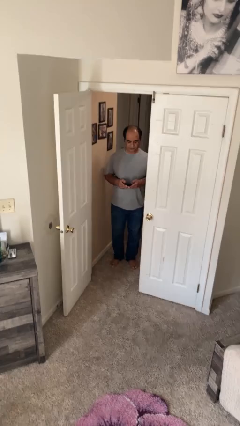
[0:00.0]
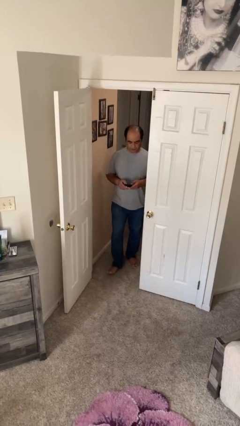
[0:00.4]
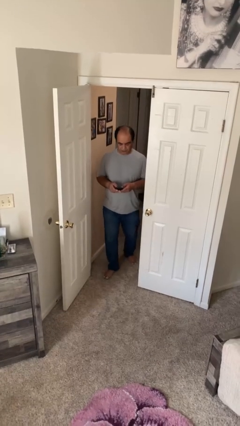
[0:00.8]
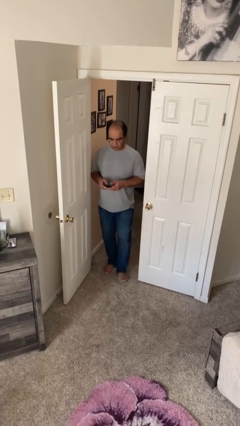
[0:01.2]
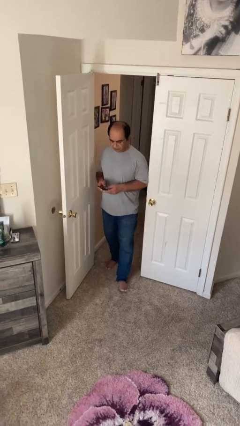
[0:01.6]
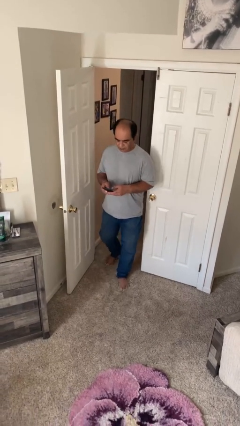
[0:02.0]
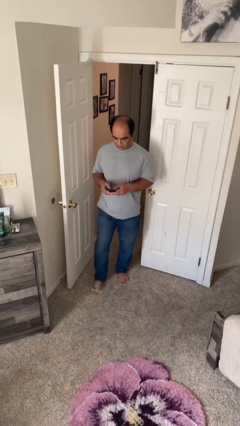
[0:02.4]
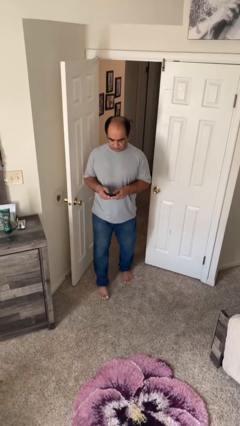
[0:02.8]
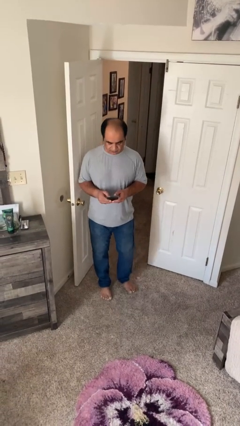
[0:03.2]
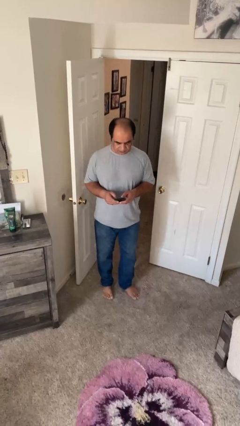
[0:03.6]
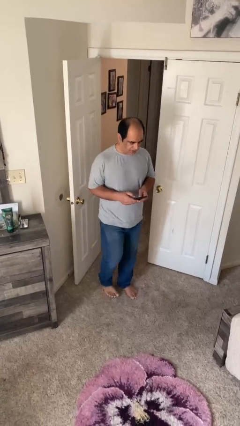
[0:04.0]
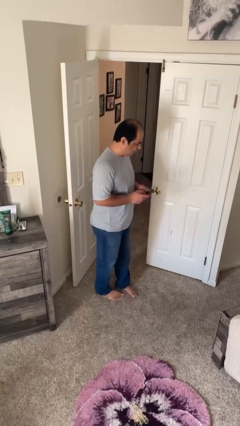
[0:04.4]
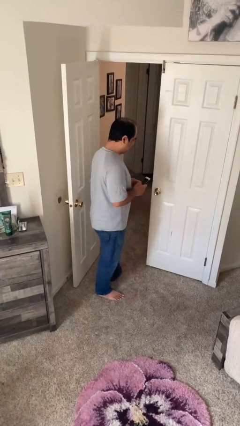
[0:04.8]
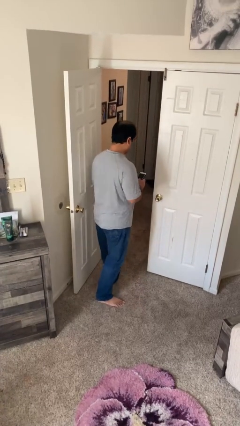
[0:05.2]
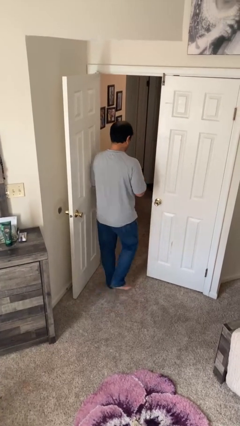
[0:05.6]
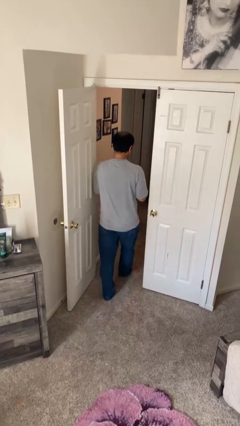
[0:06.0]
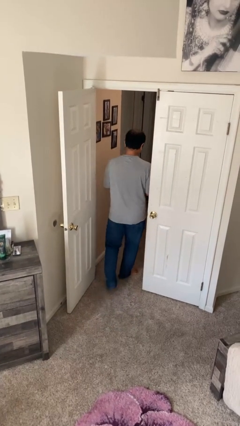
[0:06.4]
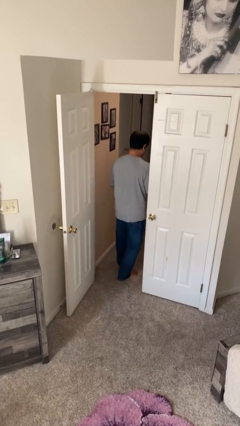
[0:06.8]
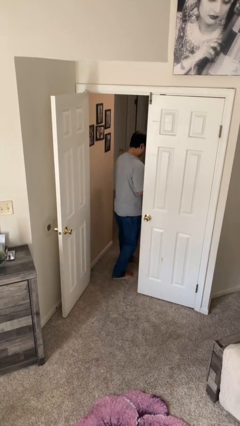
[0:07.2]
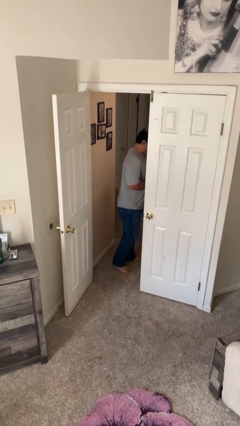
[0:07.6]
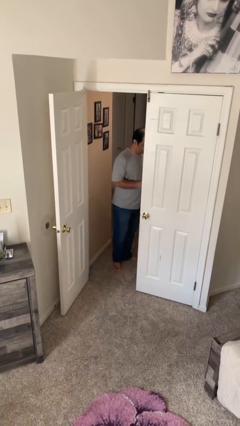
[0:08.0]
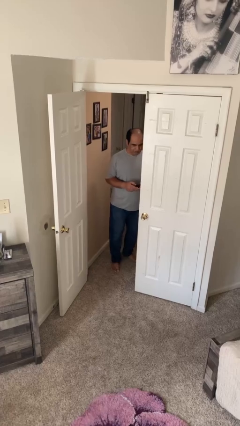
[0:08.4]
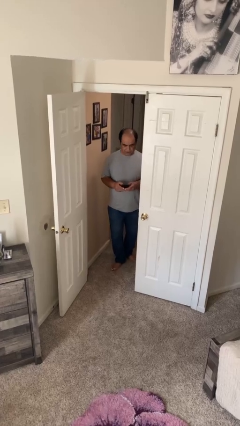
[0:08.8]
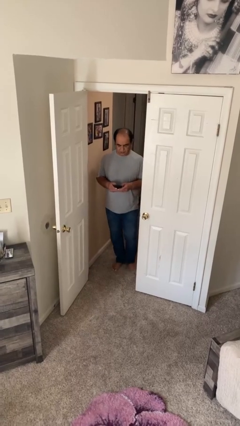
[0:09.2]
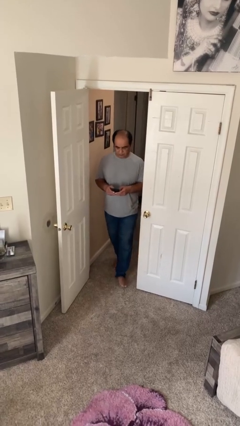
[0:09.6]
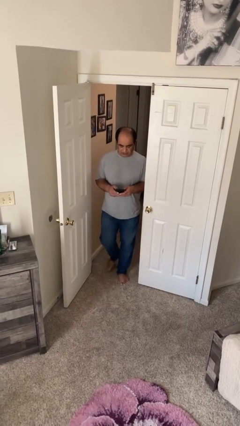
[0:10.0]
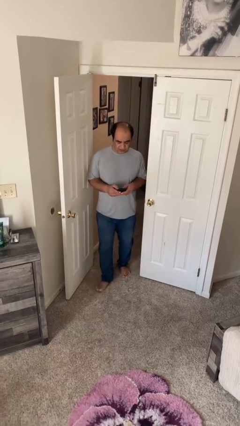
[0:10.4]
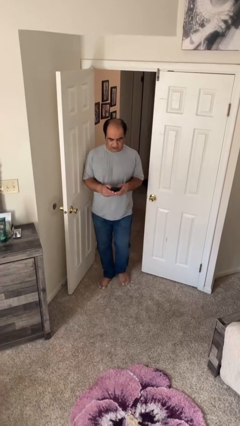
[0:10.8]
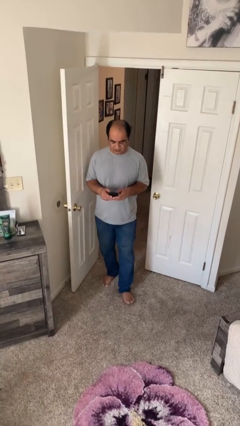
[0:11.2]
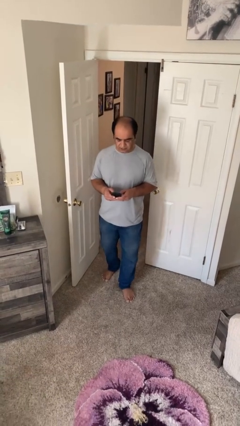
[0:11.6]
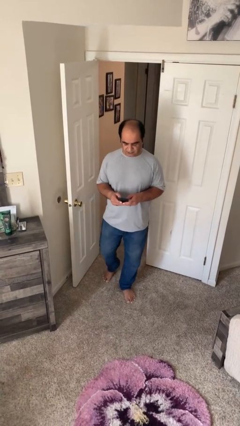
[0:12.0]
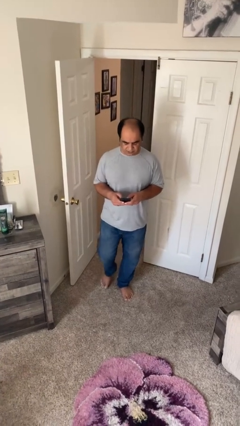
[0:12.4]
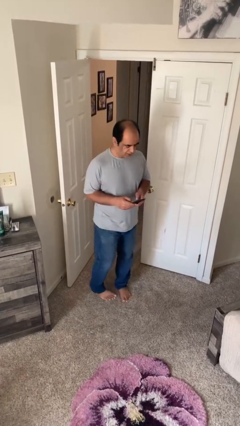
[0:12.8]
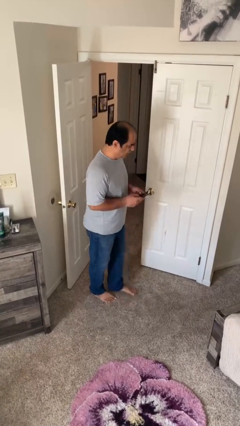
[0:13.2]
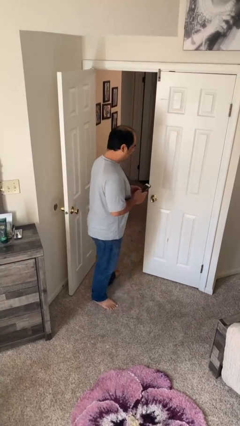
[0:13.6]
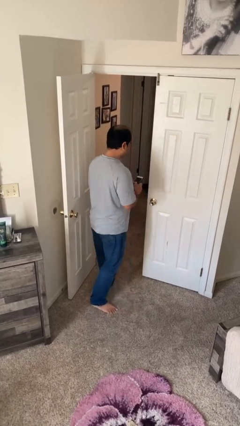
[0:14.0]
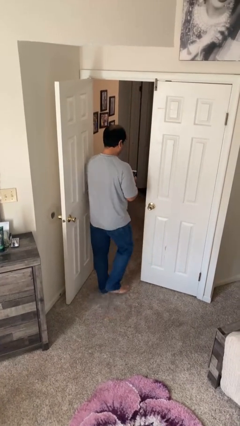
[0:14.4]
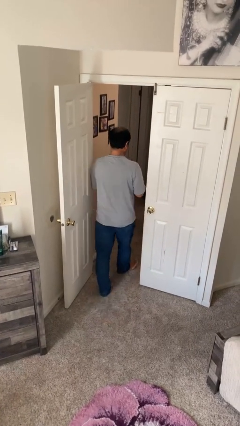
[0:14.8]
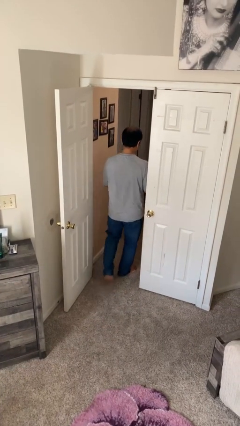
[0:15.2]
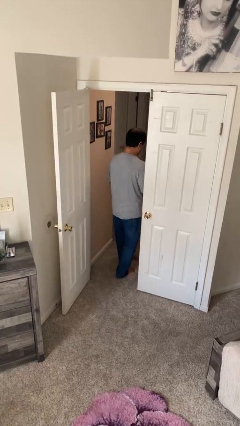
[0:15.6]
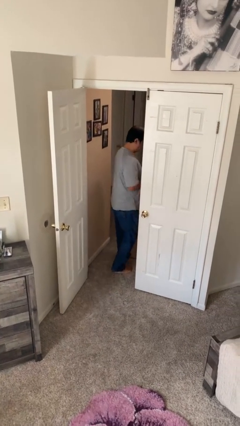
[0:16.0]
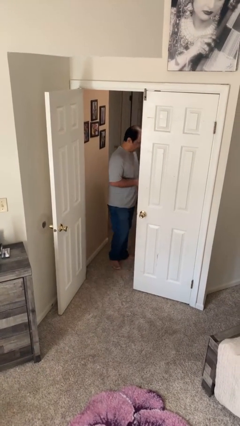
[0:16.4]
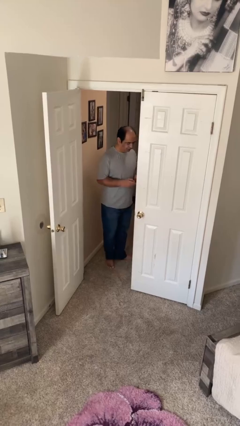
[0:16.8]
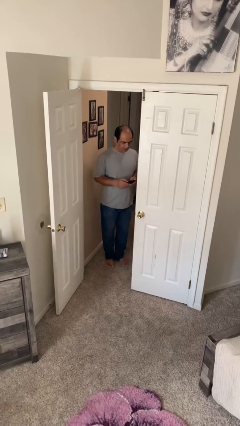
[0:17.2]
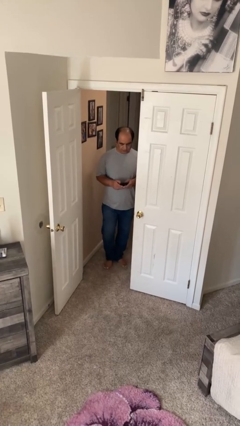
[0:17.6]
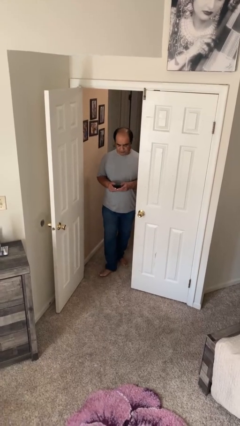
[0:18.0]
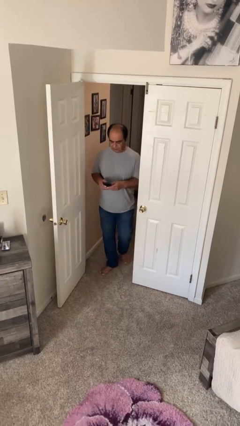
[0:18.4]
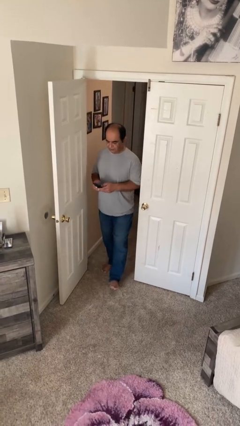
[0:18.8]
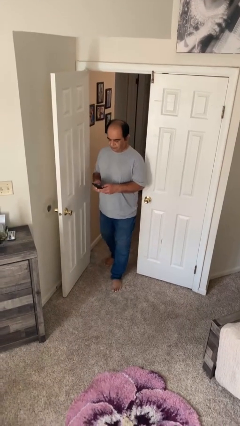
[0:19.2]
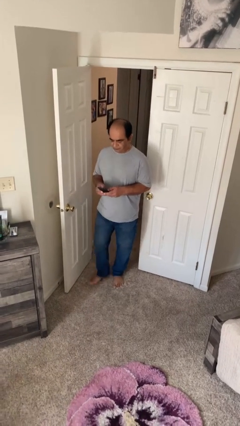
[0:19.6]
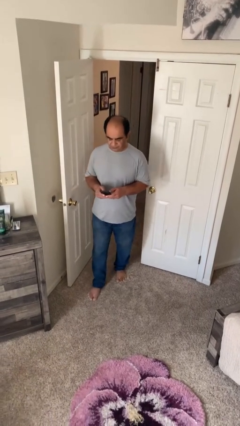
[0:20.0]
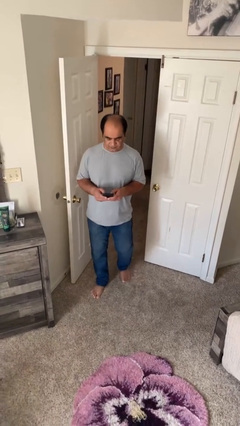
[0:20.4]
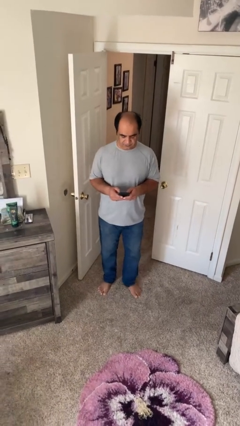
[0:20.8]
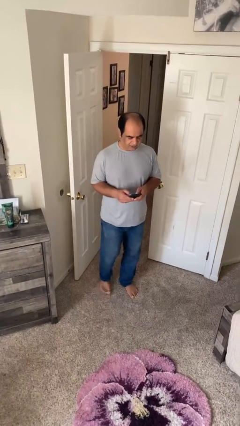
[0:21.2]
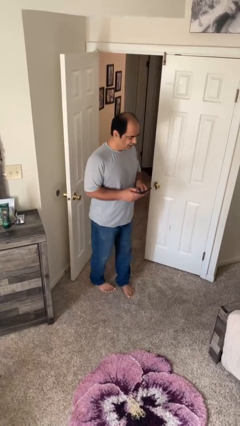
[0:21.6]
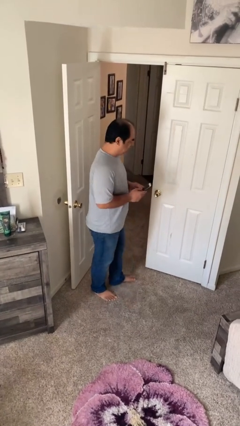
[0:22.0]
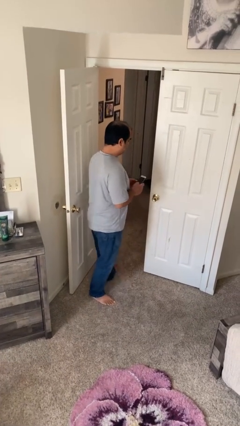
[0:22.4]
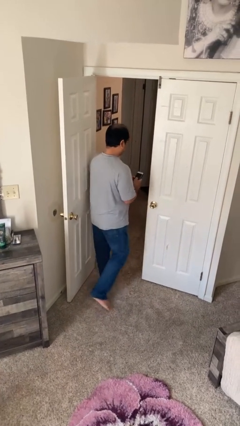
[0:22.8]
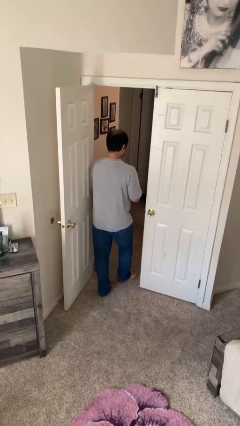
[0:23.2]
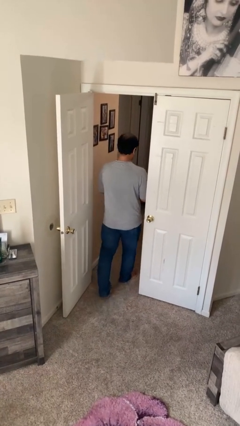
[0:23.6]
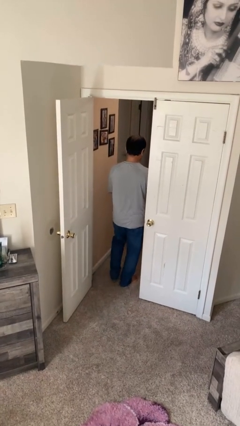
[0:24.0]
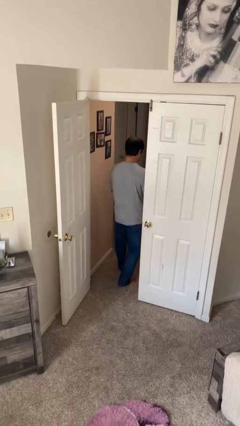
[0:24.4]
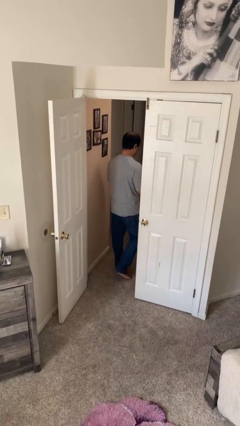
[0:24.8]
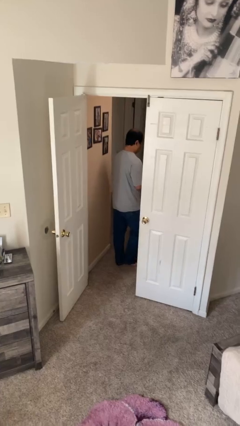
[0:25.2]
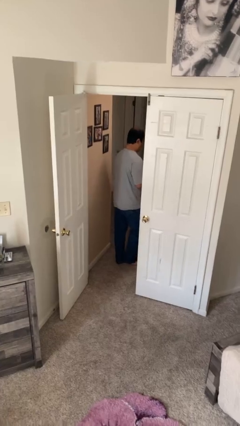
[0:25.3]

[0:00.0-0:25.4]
person texts on phone

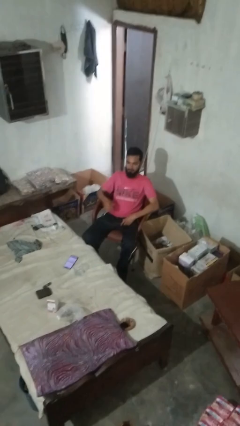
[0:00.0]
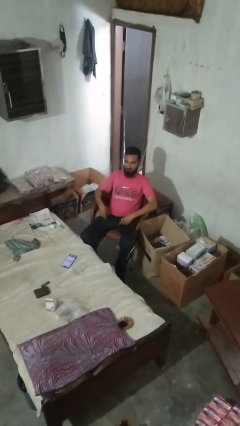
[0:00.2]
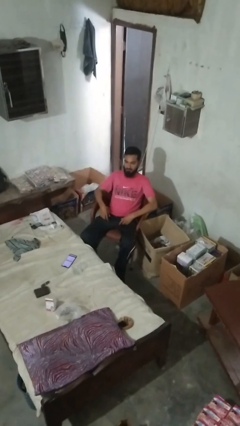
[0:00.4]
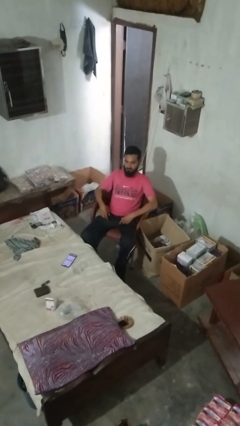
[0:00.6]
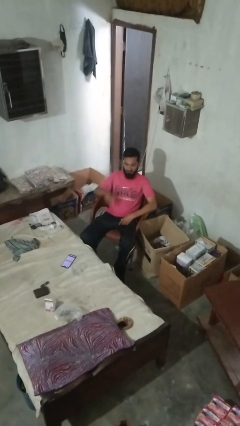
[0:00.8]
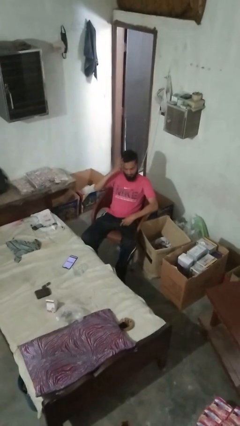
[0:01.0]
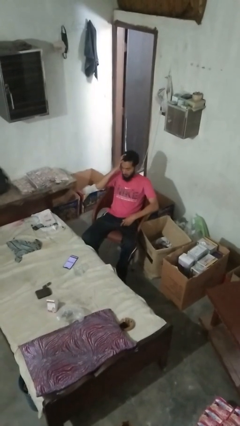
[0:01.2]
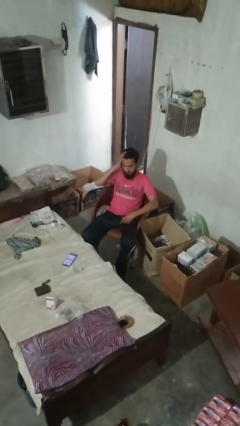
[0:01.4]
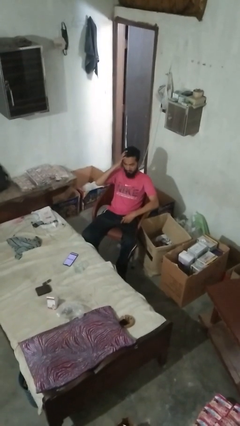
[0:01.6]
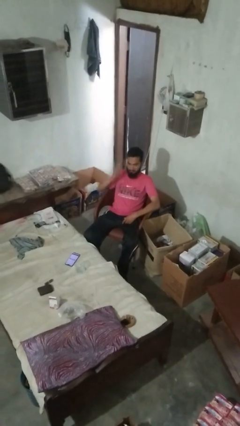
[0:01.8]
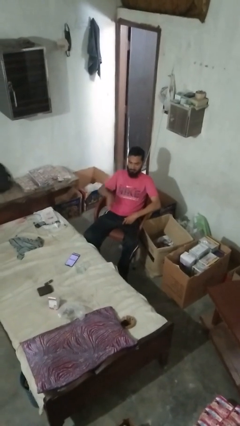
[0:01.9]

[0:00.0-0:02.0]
person shakes head

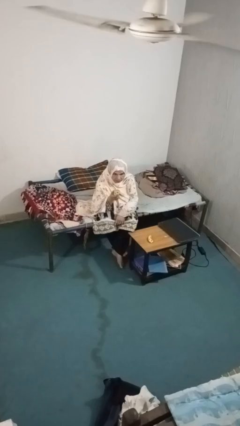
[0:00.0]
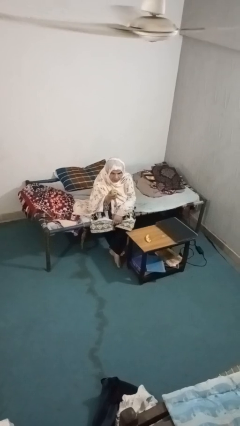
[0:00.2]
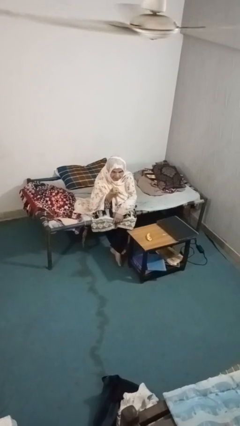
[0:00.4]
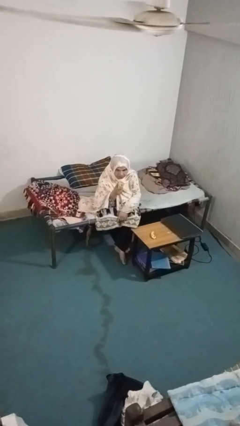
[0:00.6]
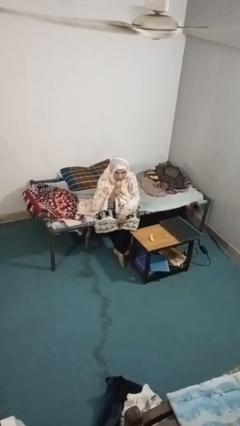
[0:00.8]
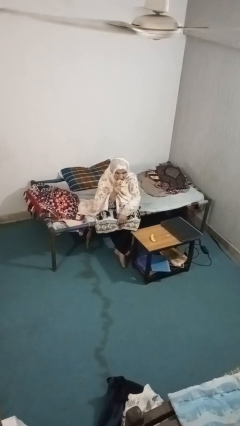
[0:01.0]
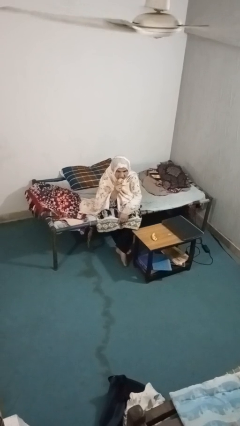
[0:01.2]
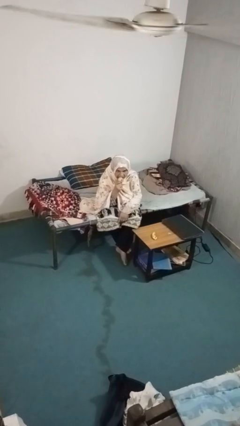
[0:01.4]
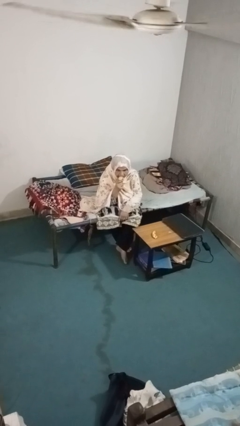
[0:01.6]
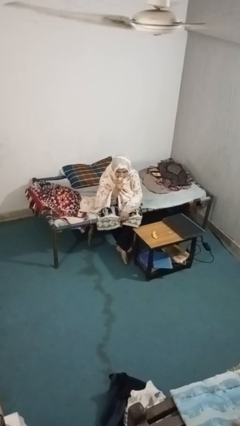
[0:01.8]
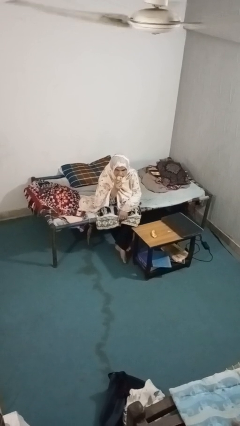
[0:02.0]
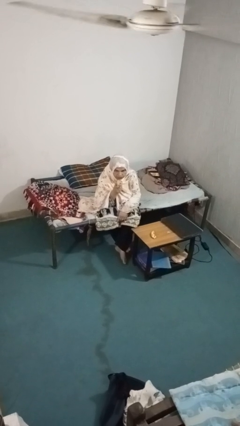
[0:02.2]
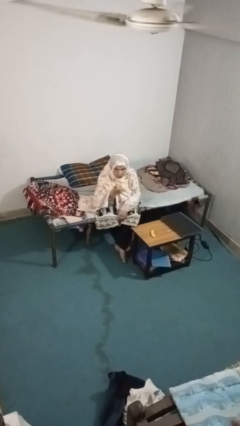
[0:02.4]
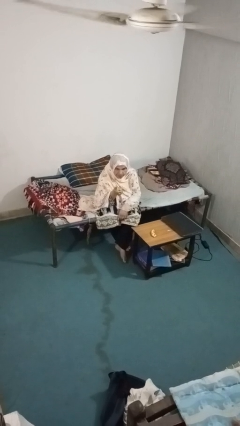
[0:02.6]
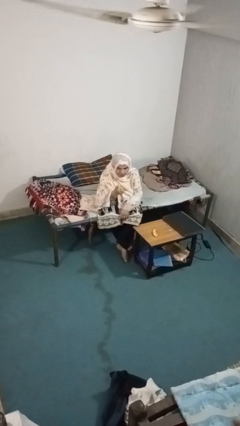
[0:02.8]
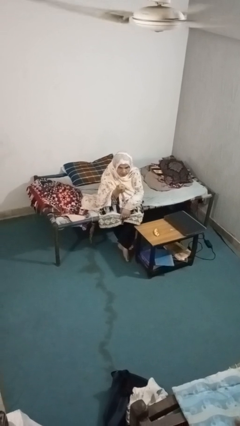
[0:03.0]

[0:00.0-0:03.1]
person eats apple

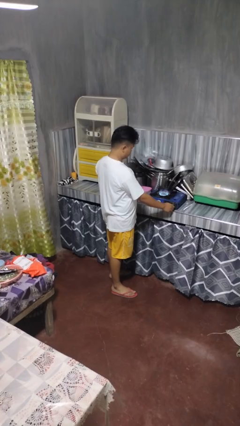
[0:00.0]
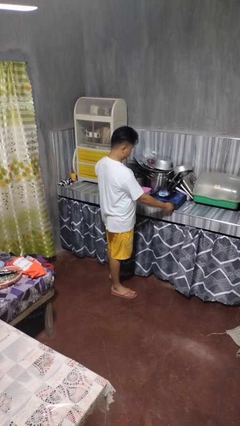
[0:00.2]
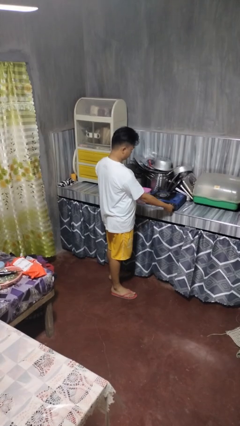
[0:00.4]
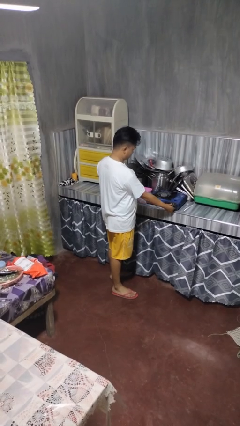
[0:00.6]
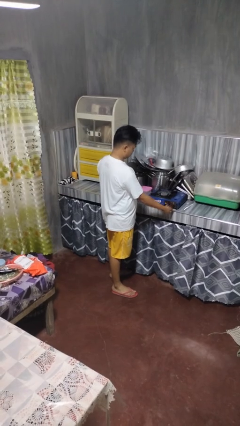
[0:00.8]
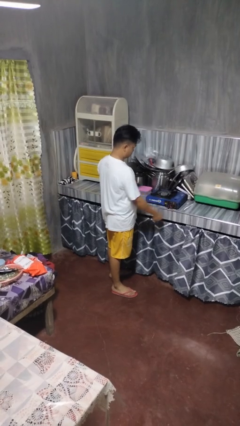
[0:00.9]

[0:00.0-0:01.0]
person turns off stovetop
